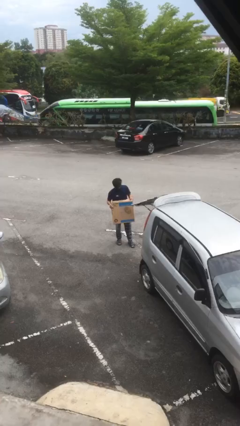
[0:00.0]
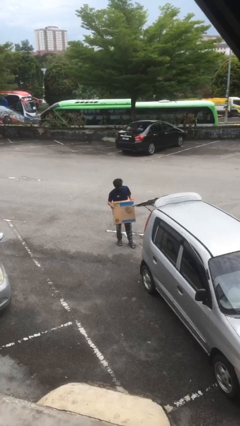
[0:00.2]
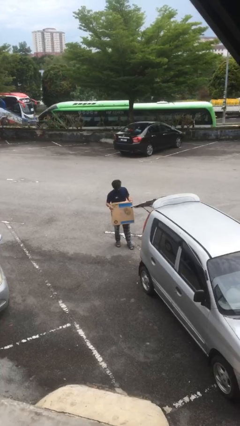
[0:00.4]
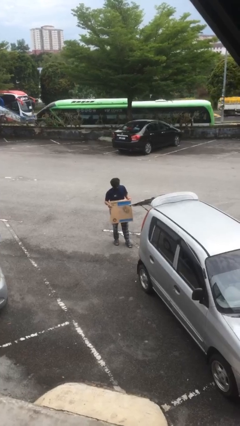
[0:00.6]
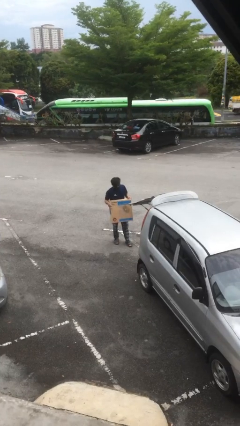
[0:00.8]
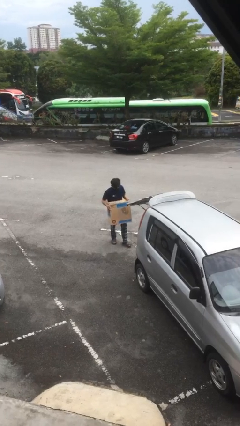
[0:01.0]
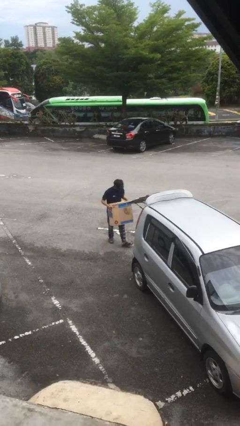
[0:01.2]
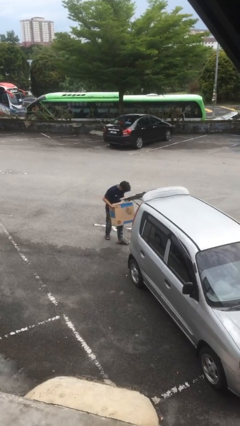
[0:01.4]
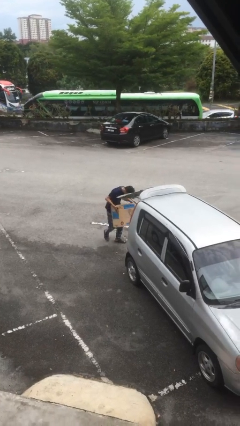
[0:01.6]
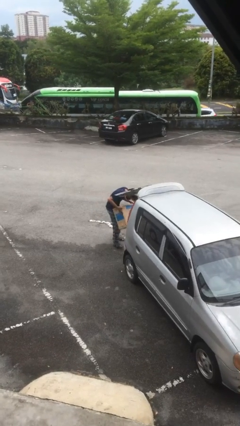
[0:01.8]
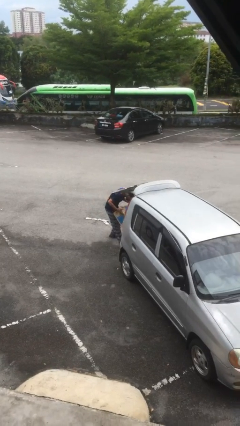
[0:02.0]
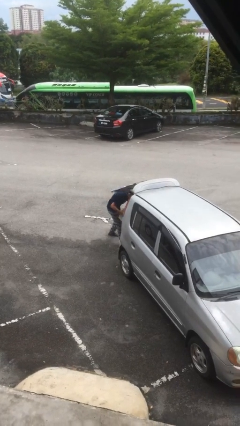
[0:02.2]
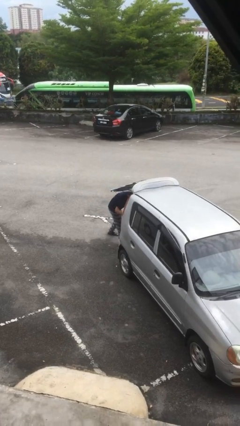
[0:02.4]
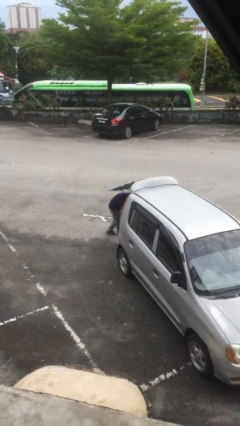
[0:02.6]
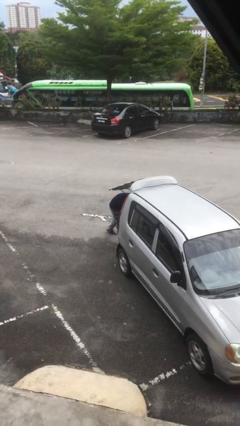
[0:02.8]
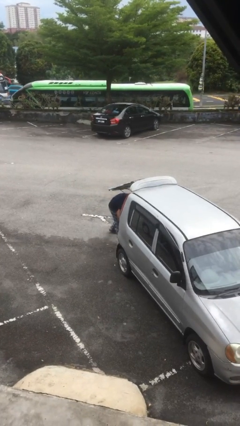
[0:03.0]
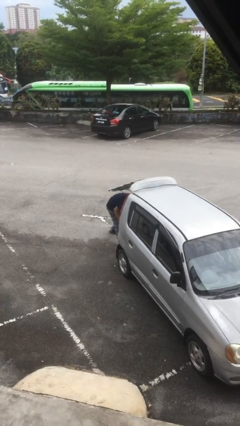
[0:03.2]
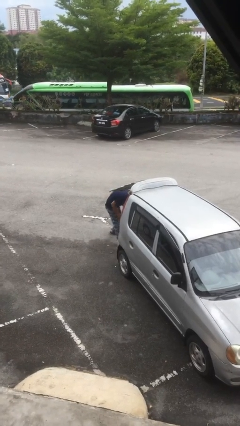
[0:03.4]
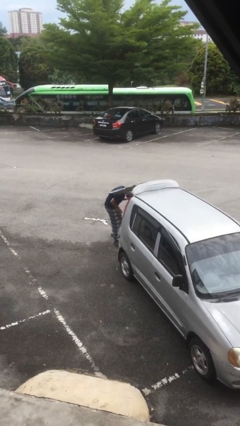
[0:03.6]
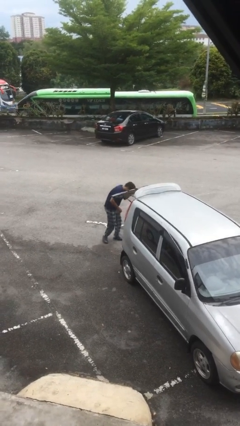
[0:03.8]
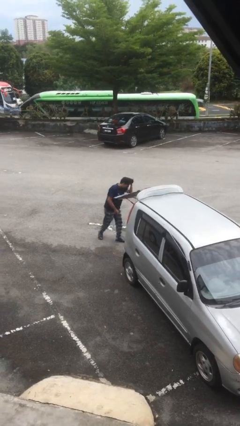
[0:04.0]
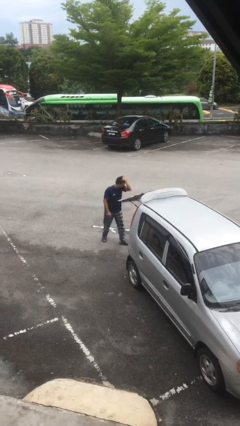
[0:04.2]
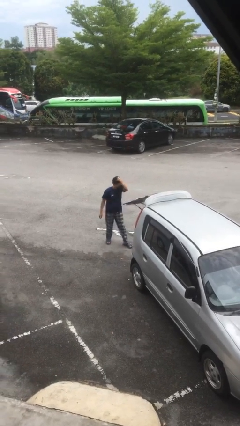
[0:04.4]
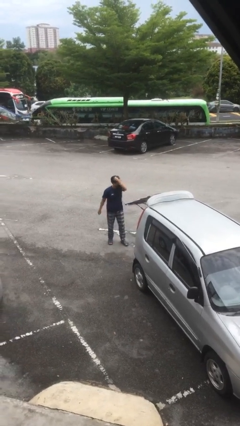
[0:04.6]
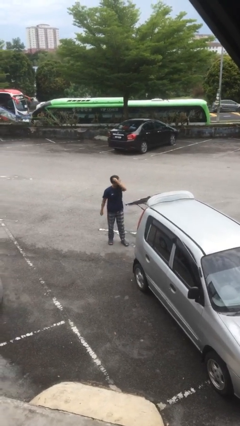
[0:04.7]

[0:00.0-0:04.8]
person loads car

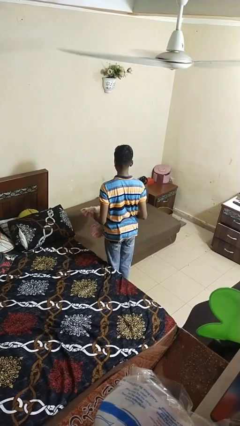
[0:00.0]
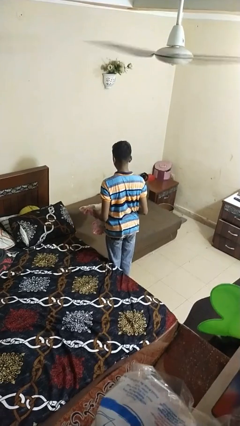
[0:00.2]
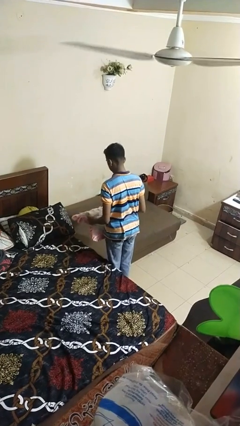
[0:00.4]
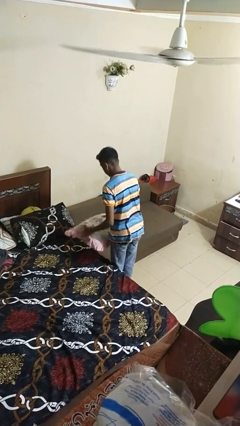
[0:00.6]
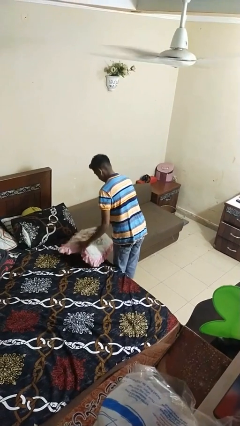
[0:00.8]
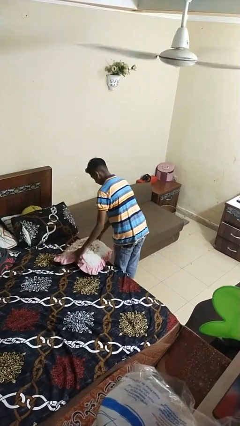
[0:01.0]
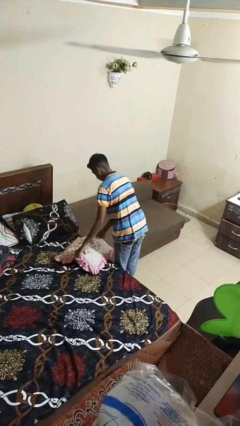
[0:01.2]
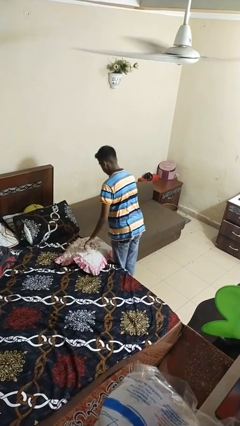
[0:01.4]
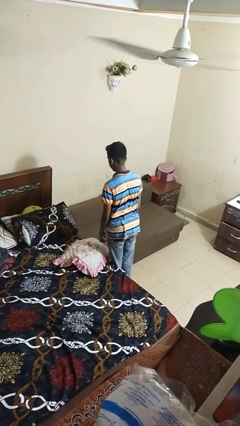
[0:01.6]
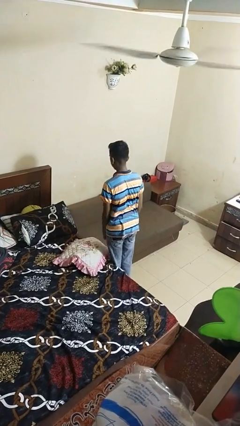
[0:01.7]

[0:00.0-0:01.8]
person puts down object on bed

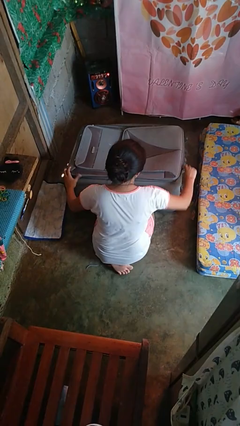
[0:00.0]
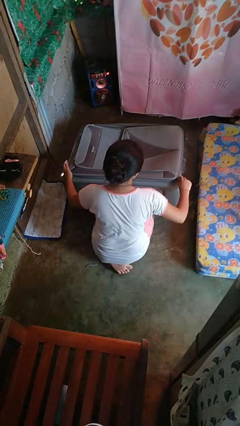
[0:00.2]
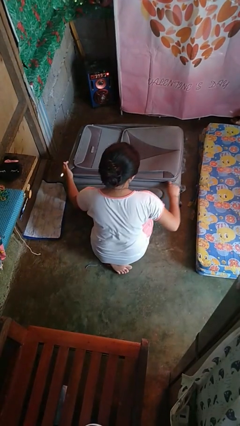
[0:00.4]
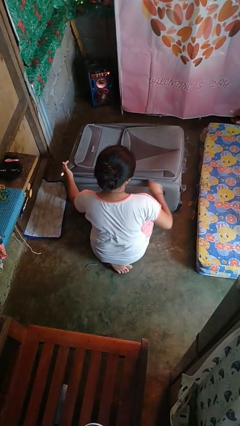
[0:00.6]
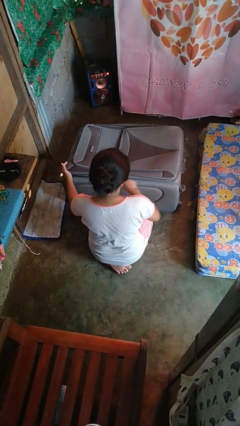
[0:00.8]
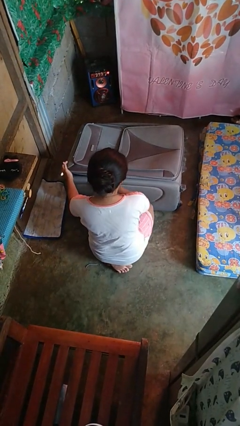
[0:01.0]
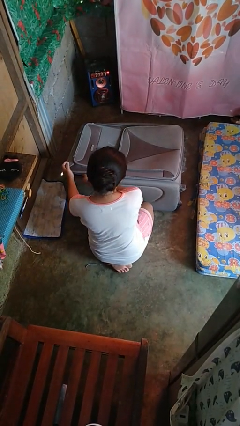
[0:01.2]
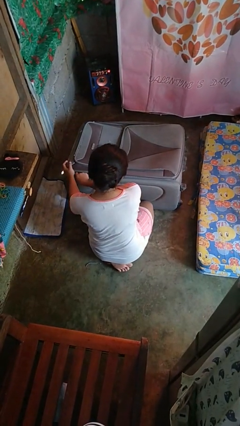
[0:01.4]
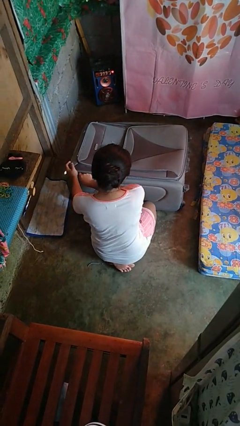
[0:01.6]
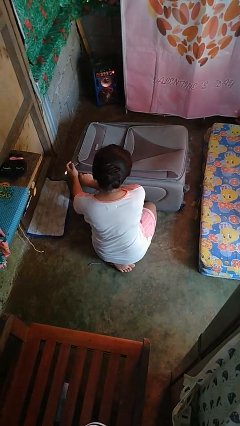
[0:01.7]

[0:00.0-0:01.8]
person closes suitcase

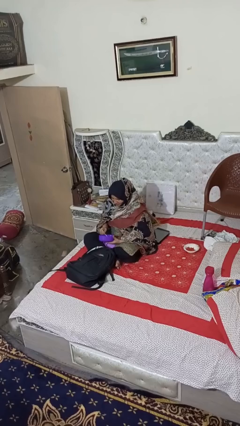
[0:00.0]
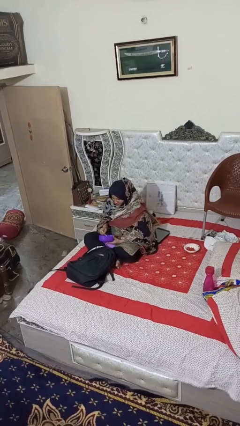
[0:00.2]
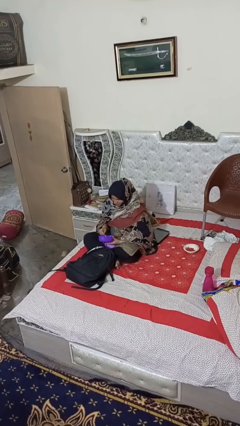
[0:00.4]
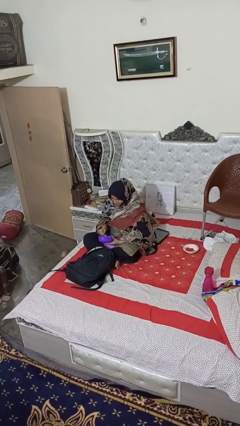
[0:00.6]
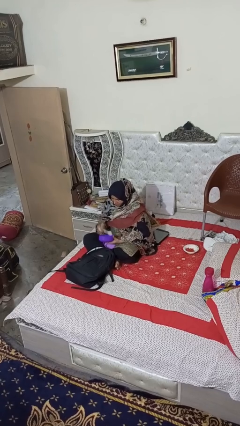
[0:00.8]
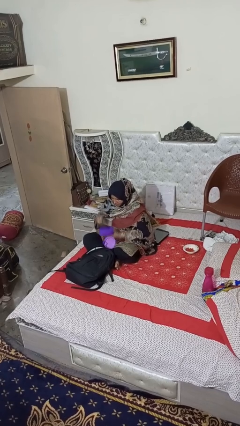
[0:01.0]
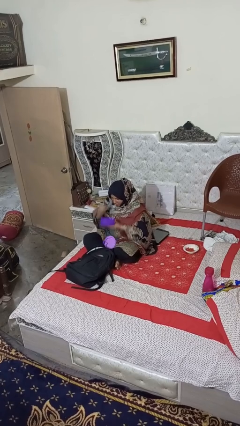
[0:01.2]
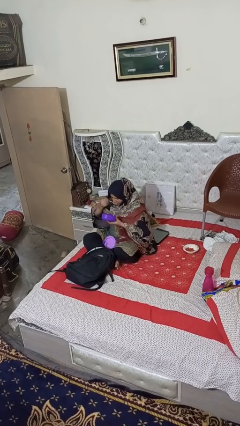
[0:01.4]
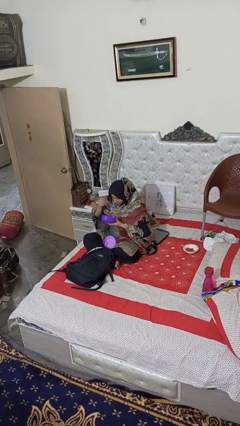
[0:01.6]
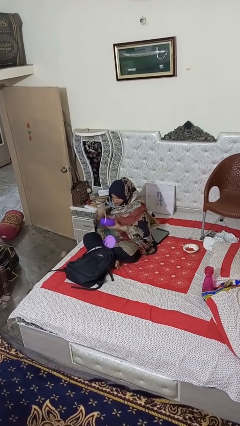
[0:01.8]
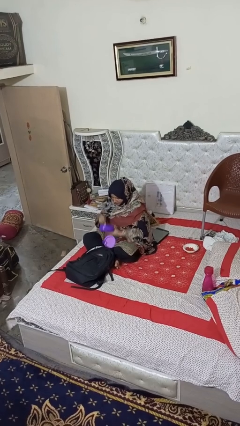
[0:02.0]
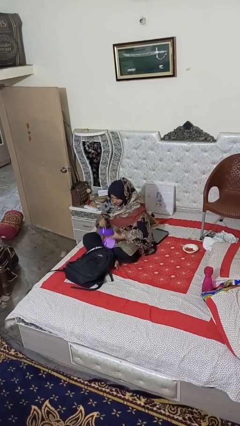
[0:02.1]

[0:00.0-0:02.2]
person eats snack from bag

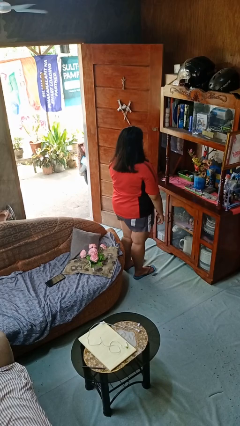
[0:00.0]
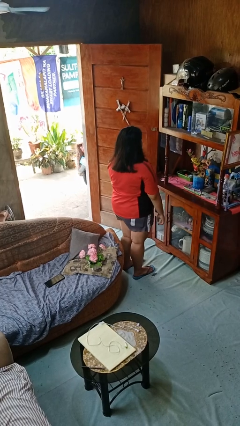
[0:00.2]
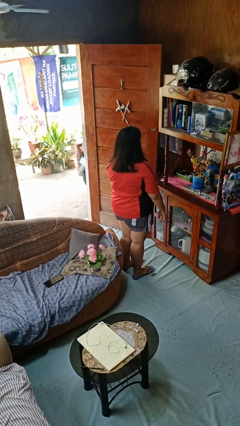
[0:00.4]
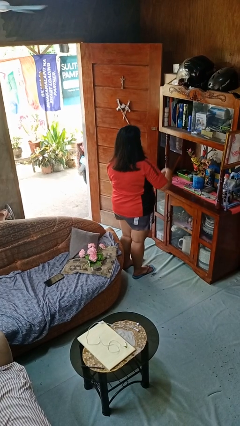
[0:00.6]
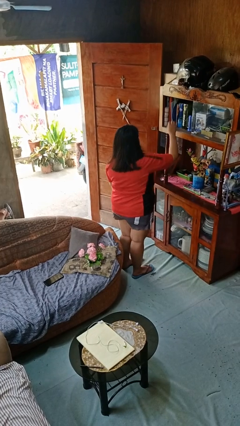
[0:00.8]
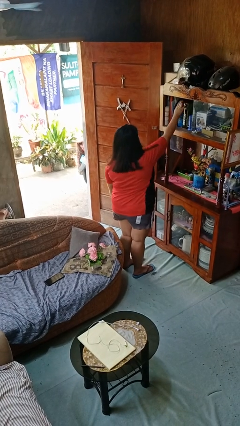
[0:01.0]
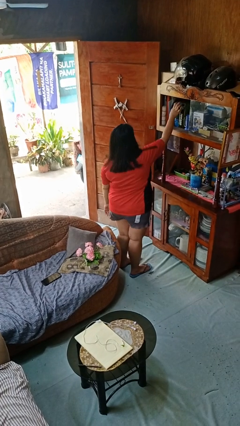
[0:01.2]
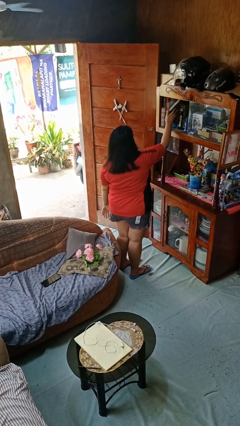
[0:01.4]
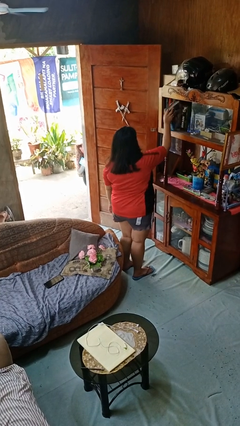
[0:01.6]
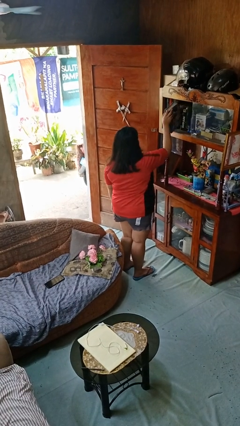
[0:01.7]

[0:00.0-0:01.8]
person picks up object from shelf

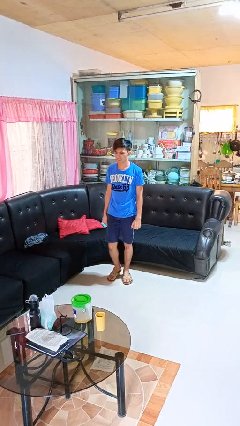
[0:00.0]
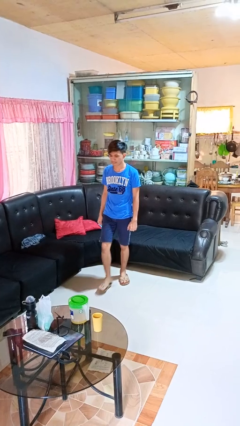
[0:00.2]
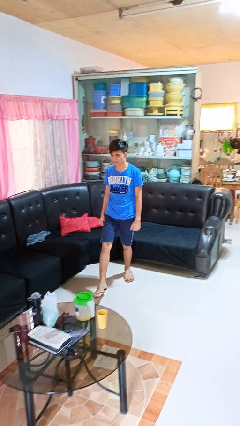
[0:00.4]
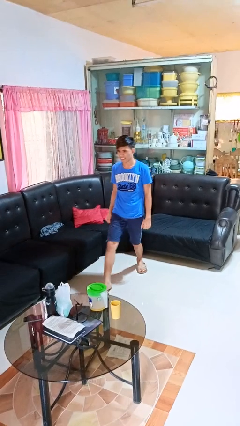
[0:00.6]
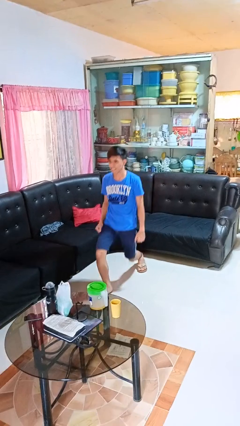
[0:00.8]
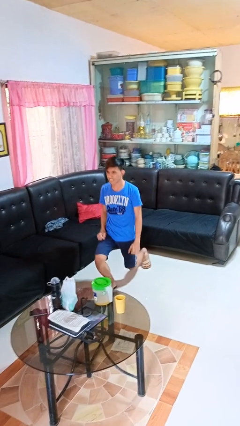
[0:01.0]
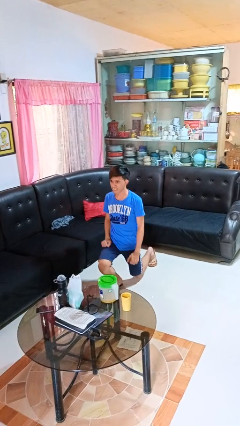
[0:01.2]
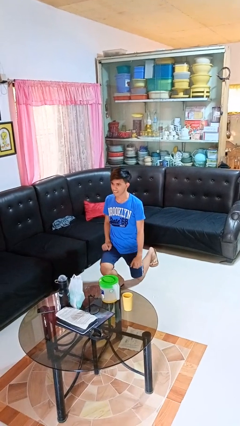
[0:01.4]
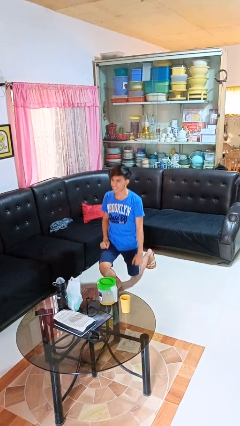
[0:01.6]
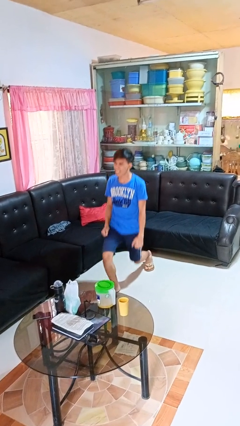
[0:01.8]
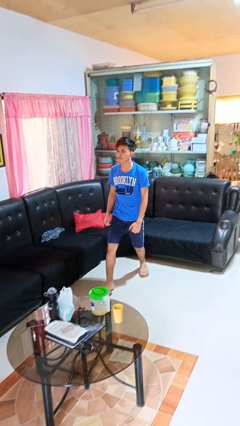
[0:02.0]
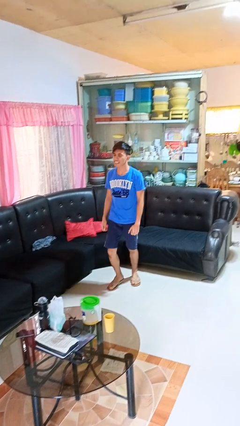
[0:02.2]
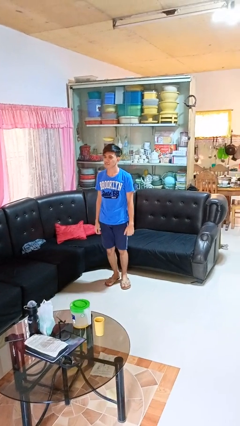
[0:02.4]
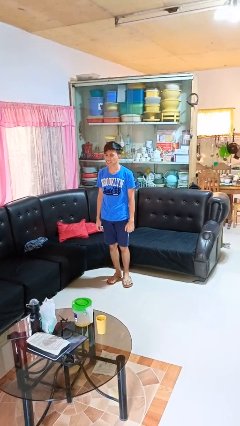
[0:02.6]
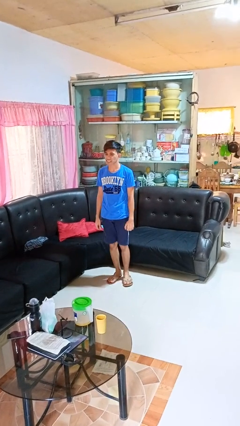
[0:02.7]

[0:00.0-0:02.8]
person exercises with lunges

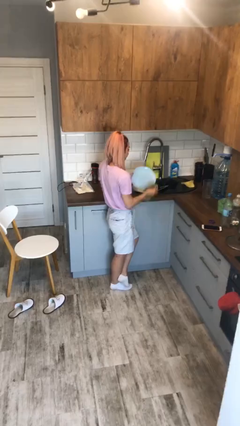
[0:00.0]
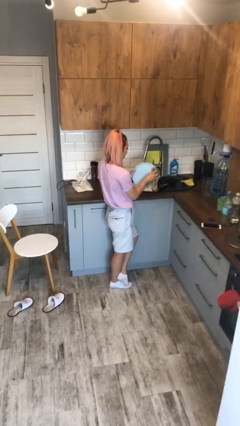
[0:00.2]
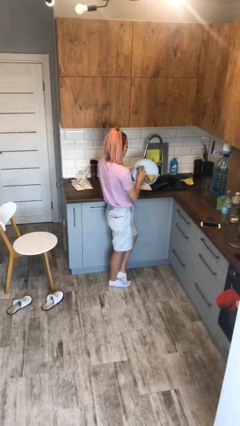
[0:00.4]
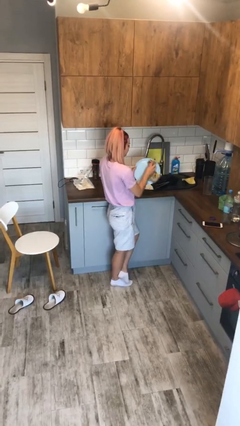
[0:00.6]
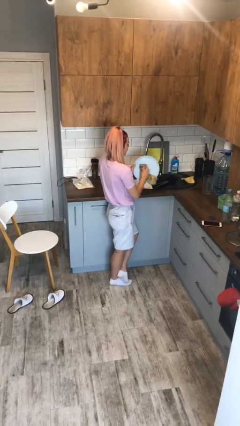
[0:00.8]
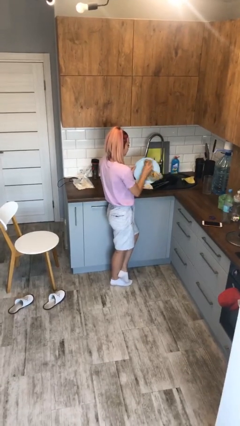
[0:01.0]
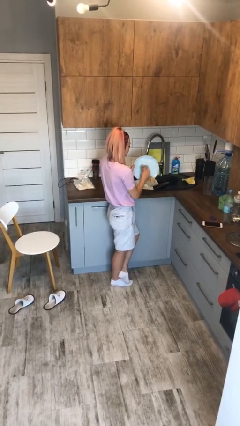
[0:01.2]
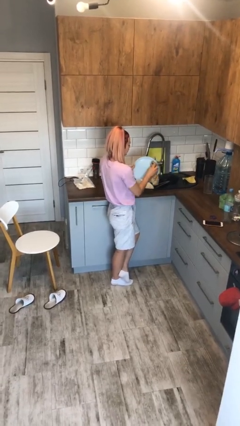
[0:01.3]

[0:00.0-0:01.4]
person dries dish
